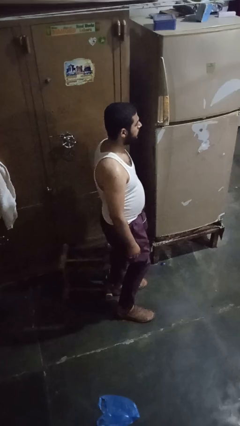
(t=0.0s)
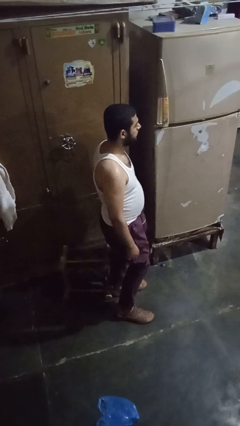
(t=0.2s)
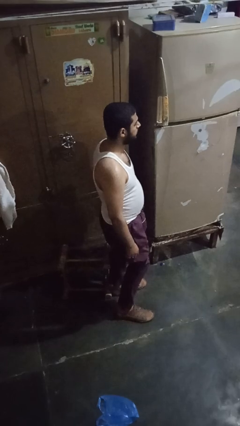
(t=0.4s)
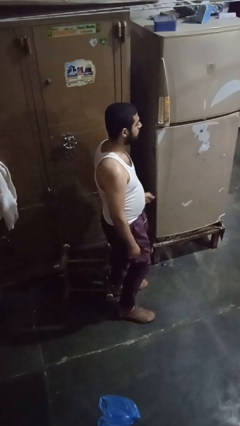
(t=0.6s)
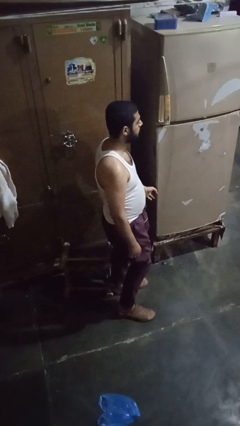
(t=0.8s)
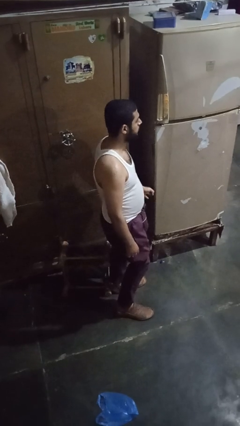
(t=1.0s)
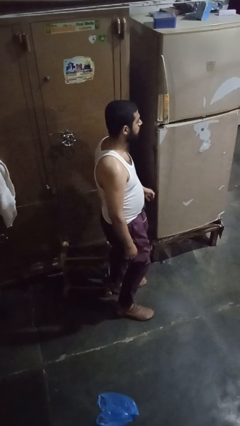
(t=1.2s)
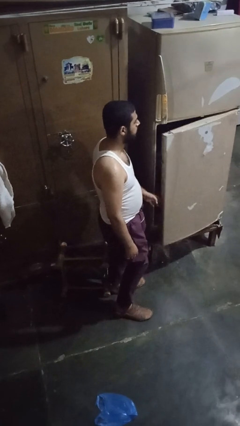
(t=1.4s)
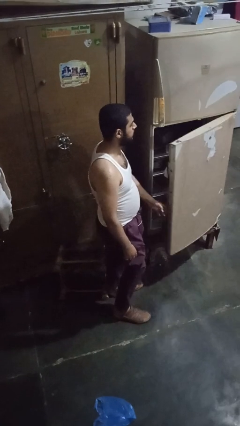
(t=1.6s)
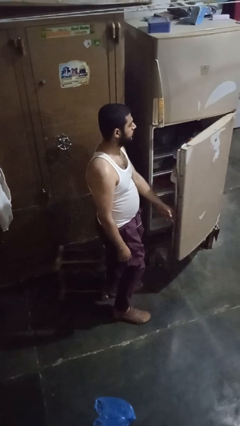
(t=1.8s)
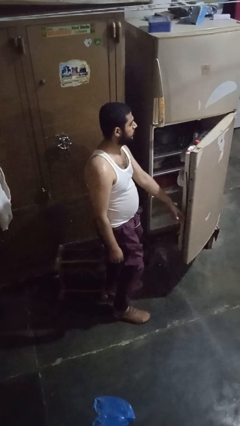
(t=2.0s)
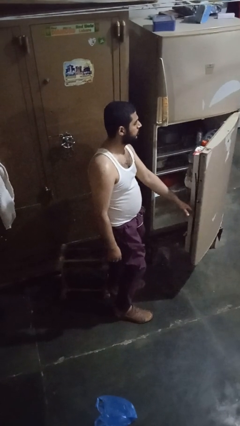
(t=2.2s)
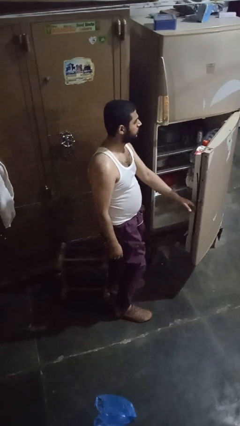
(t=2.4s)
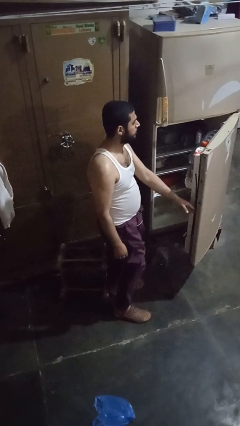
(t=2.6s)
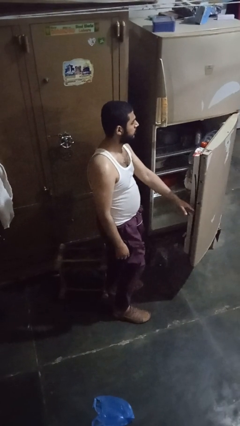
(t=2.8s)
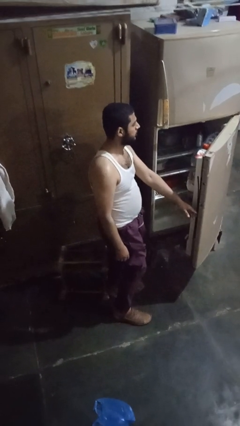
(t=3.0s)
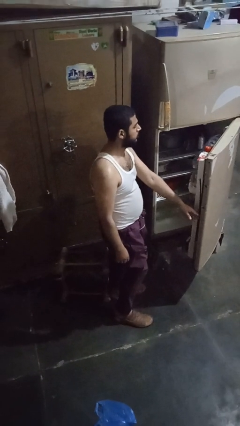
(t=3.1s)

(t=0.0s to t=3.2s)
person opens refrigerator

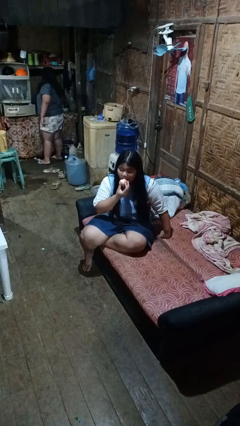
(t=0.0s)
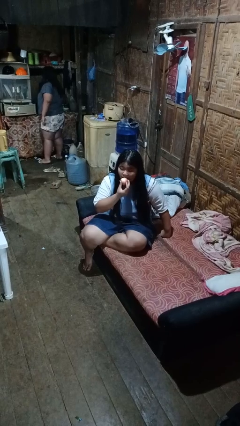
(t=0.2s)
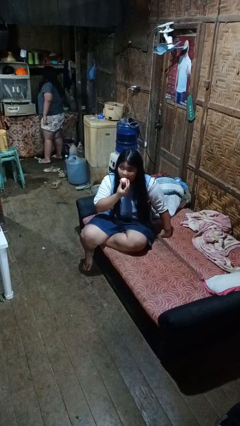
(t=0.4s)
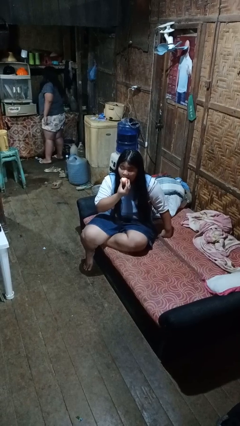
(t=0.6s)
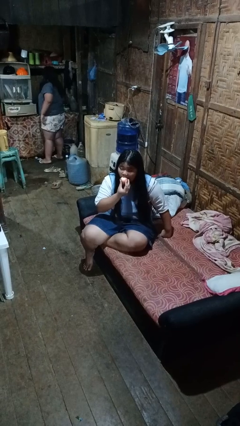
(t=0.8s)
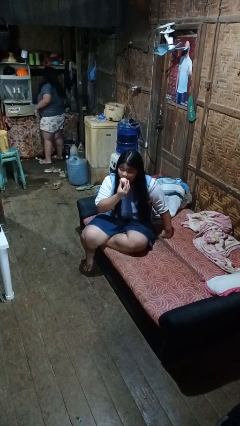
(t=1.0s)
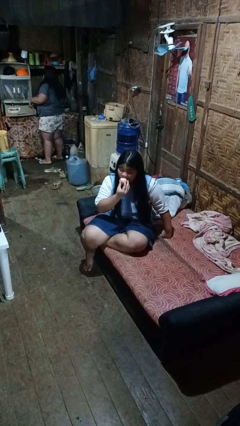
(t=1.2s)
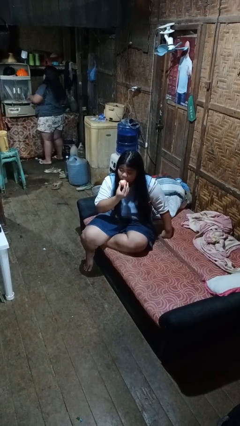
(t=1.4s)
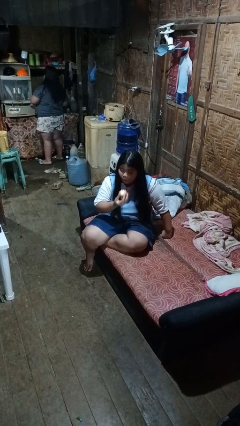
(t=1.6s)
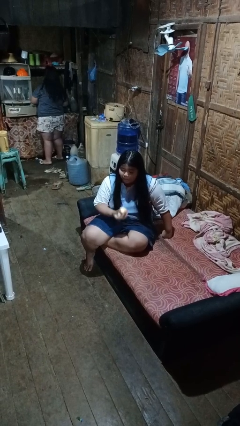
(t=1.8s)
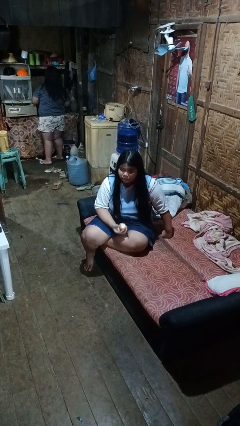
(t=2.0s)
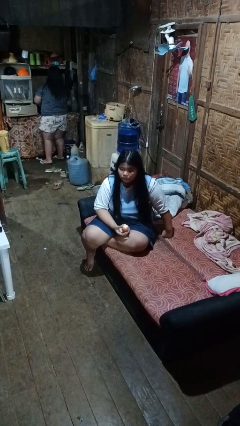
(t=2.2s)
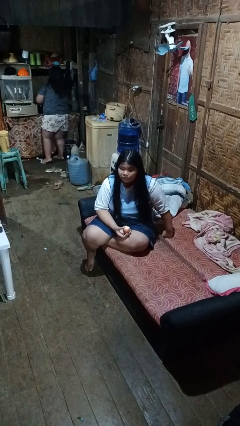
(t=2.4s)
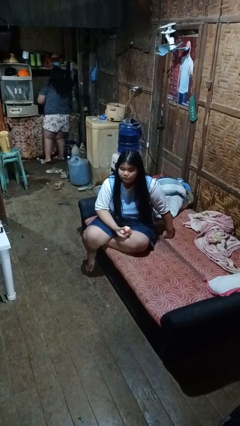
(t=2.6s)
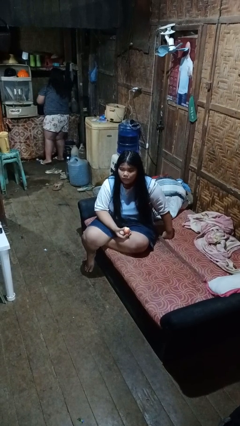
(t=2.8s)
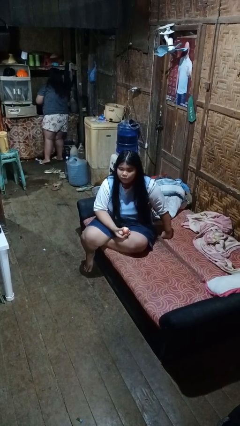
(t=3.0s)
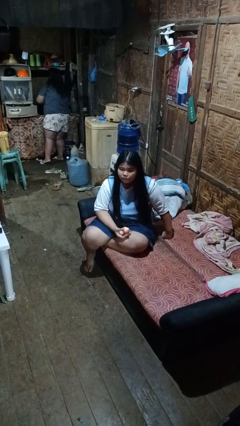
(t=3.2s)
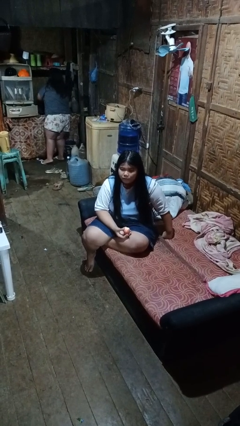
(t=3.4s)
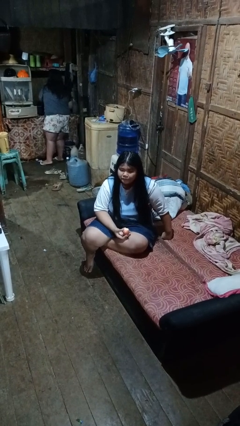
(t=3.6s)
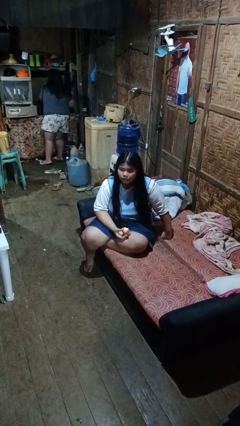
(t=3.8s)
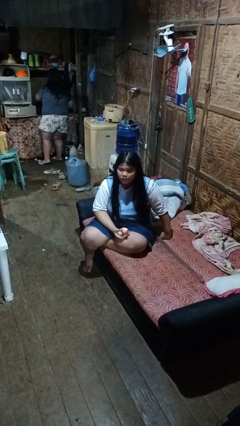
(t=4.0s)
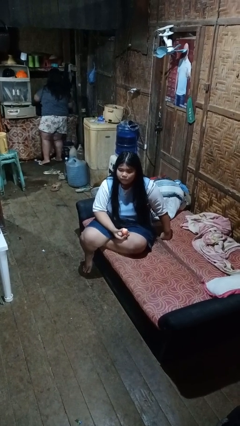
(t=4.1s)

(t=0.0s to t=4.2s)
person eats apple

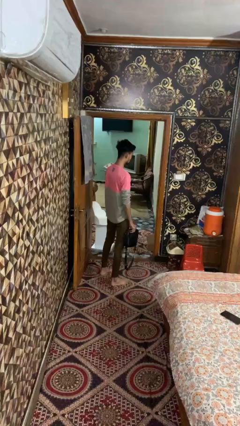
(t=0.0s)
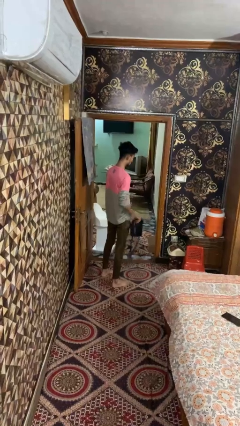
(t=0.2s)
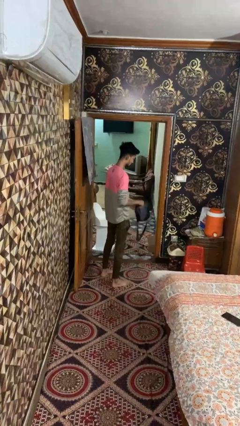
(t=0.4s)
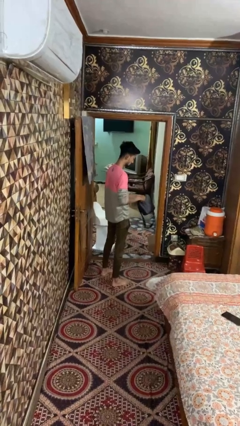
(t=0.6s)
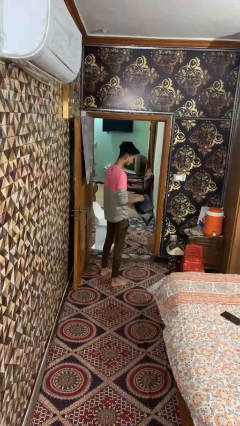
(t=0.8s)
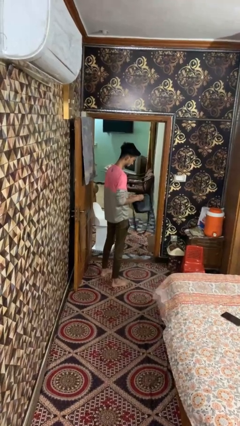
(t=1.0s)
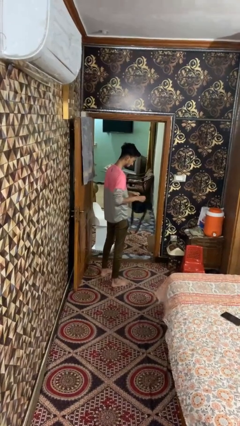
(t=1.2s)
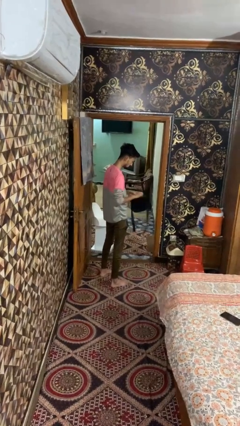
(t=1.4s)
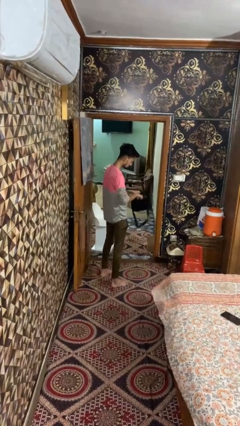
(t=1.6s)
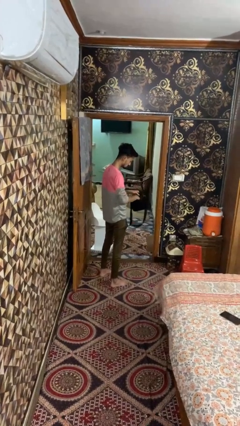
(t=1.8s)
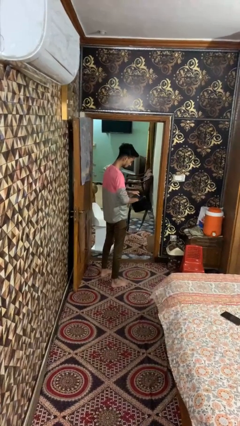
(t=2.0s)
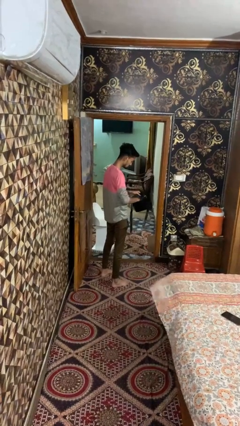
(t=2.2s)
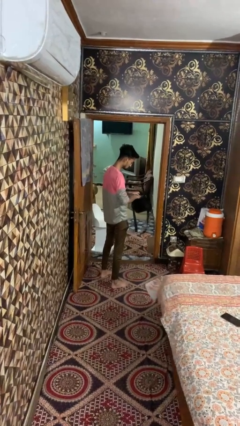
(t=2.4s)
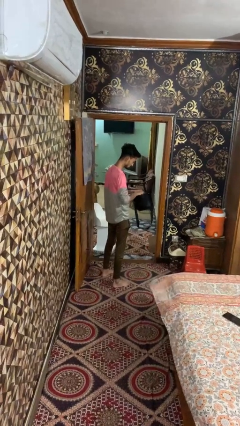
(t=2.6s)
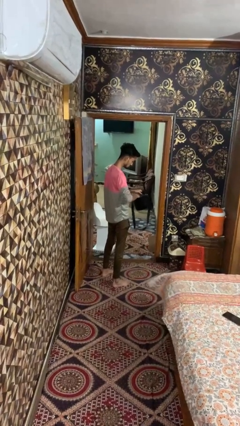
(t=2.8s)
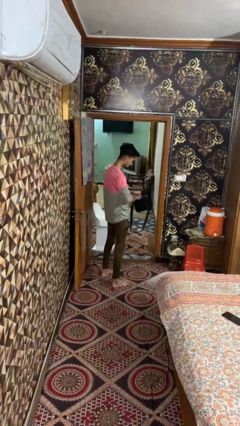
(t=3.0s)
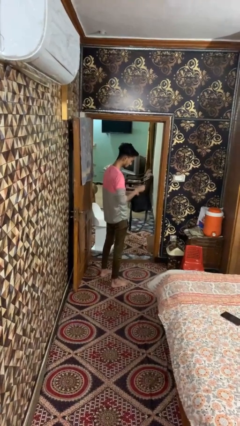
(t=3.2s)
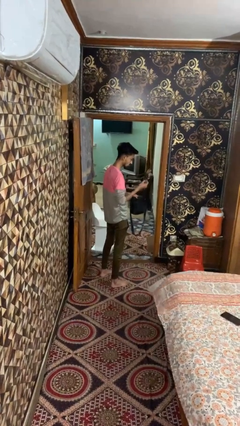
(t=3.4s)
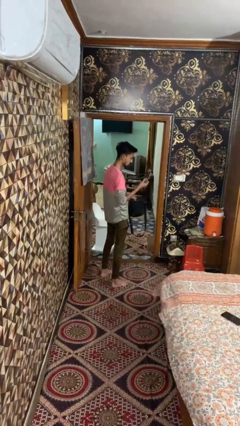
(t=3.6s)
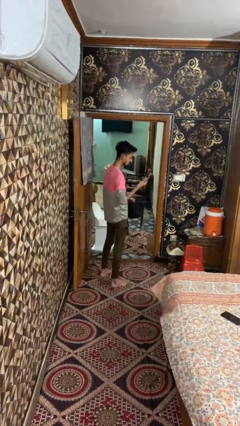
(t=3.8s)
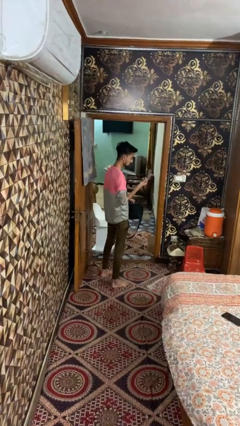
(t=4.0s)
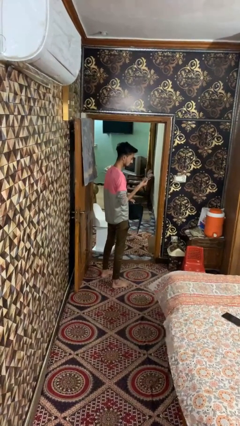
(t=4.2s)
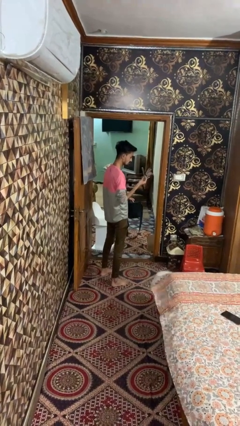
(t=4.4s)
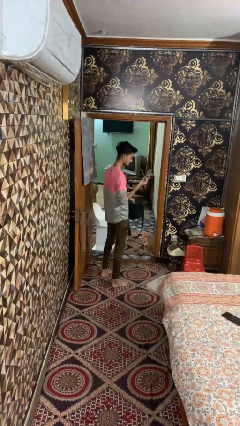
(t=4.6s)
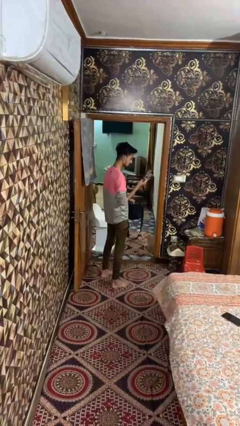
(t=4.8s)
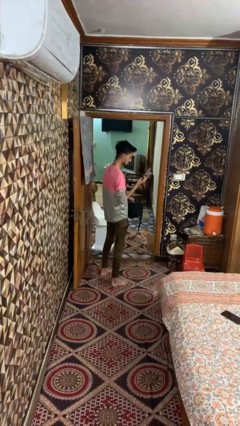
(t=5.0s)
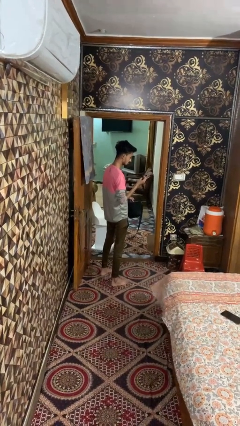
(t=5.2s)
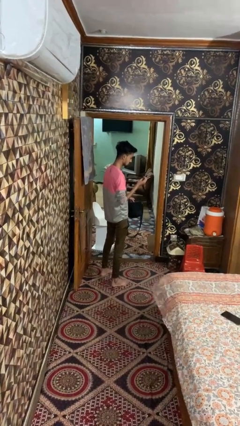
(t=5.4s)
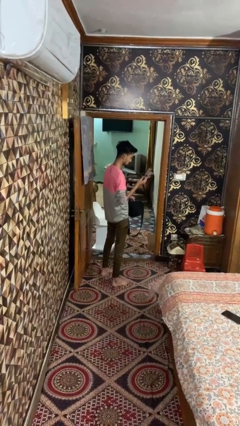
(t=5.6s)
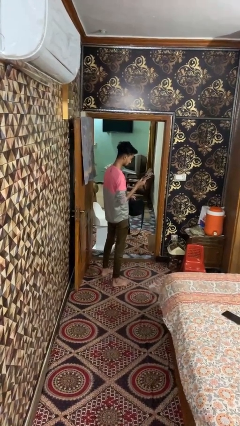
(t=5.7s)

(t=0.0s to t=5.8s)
person takes object from bag

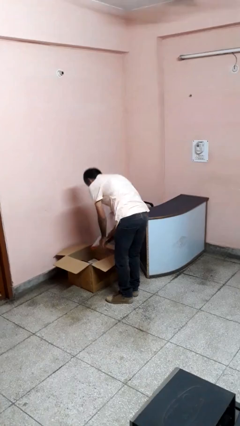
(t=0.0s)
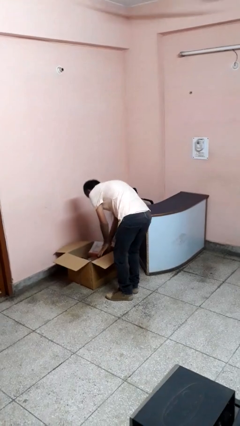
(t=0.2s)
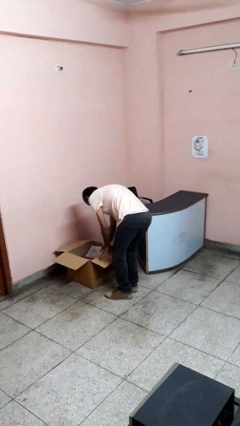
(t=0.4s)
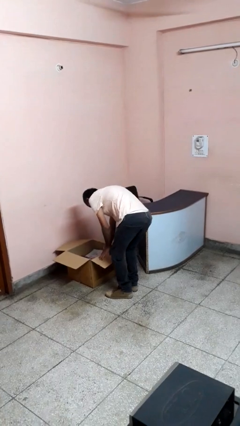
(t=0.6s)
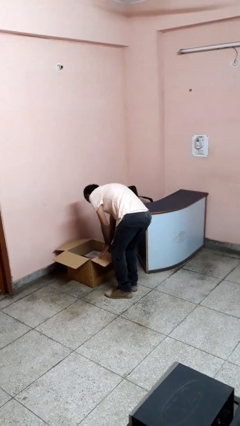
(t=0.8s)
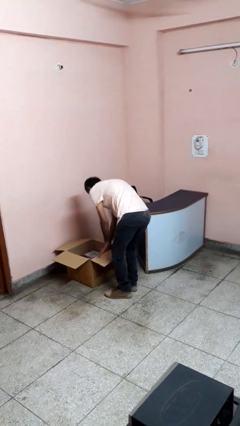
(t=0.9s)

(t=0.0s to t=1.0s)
person puts object into box

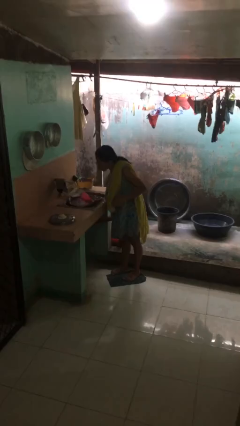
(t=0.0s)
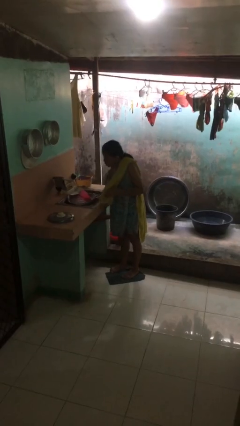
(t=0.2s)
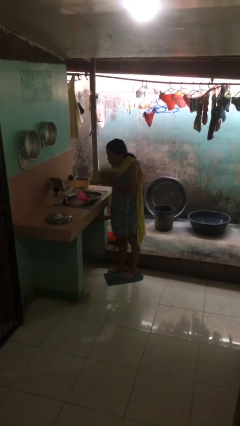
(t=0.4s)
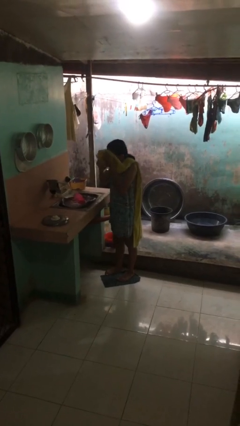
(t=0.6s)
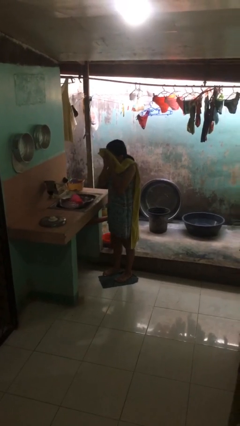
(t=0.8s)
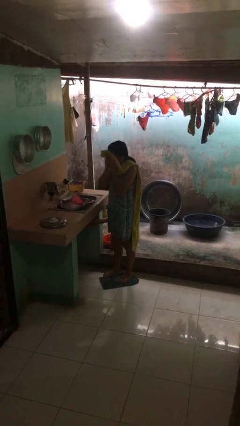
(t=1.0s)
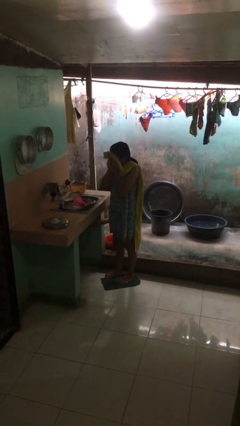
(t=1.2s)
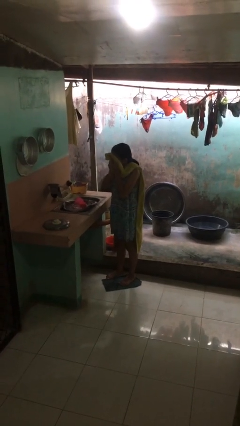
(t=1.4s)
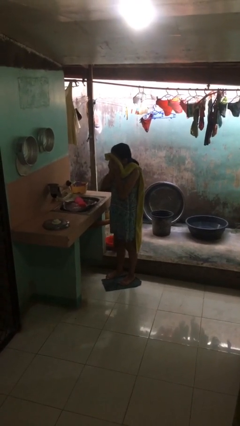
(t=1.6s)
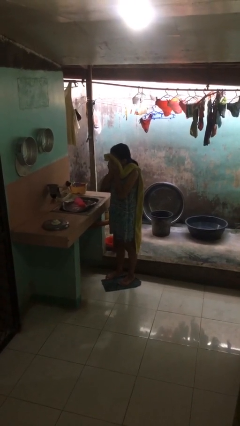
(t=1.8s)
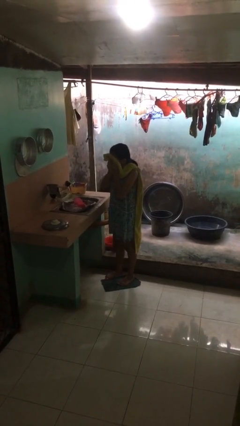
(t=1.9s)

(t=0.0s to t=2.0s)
person dries face with towel

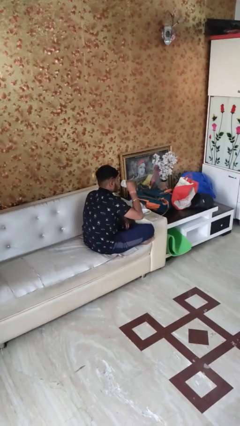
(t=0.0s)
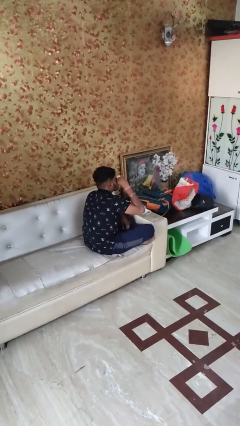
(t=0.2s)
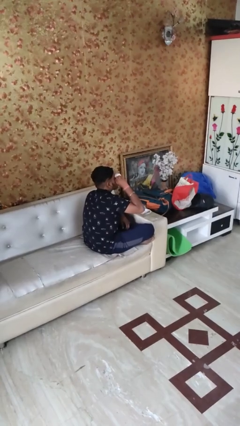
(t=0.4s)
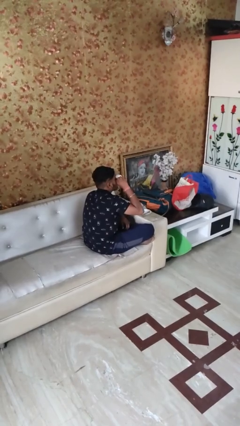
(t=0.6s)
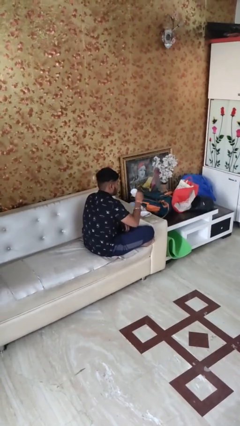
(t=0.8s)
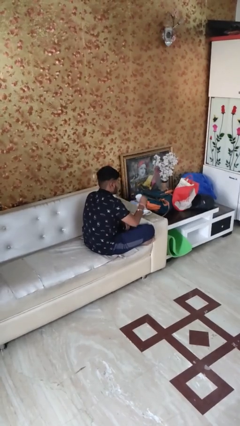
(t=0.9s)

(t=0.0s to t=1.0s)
person drinks from mug
